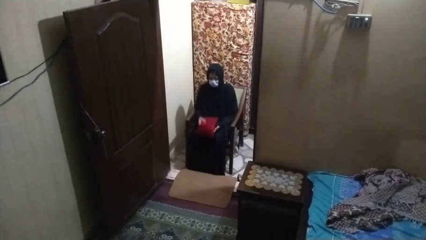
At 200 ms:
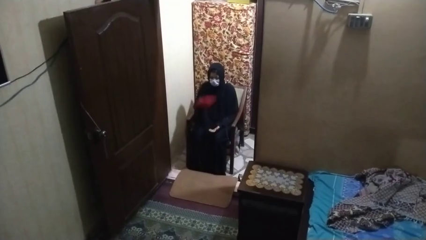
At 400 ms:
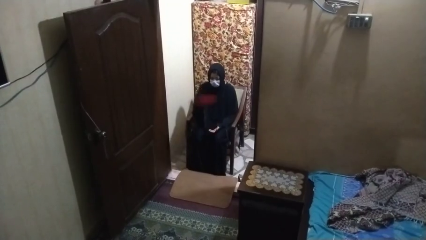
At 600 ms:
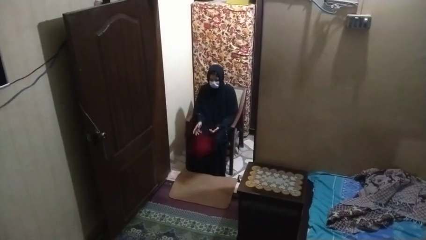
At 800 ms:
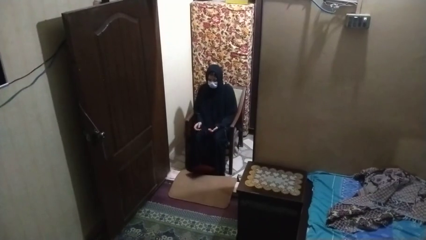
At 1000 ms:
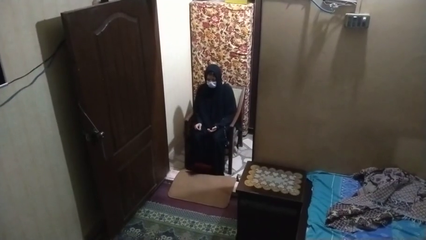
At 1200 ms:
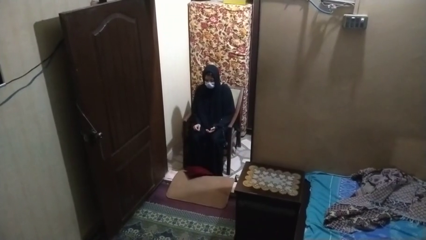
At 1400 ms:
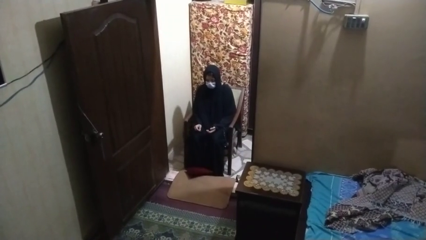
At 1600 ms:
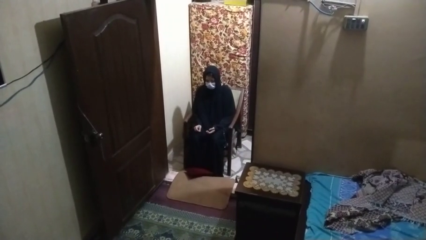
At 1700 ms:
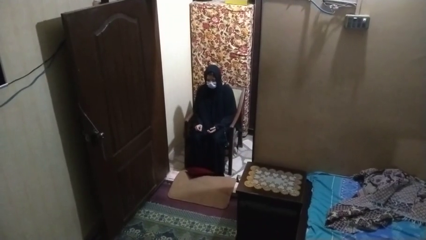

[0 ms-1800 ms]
person throws object into air

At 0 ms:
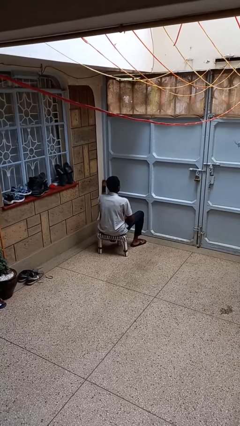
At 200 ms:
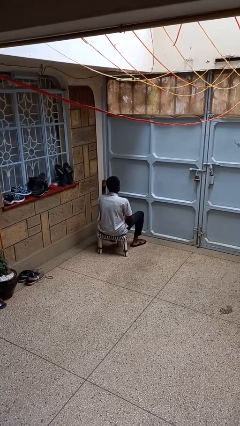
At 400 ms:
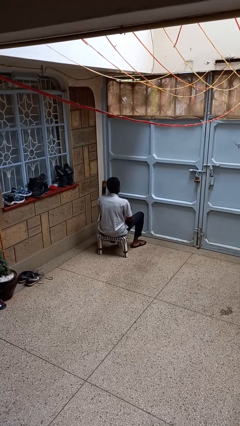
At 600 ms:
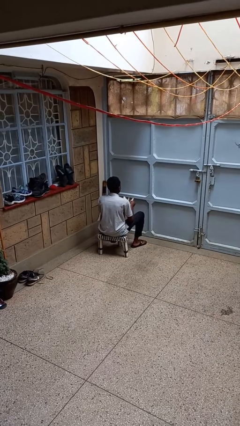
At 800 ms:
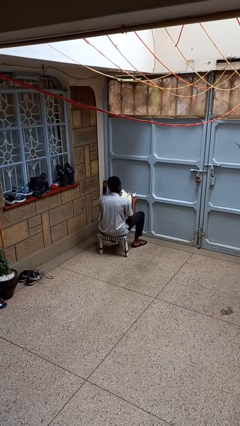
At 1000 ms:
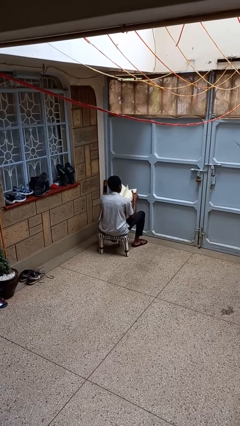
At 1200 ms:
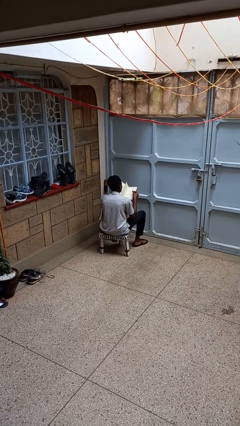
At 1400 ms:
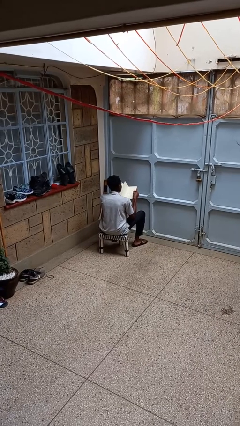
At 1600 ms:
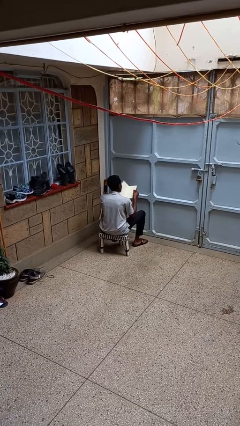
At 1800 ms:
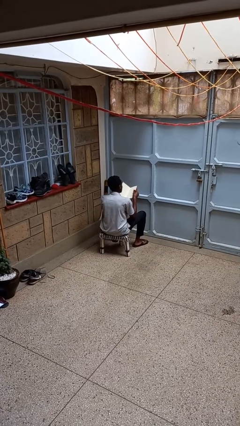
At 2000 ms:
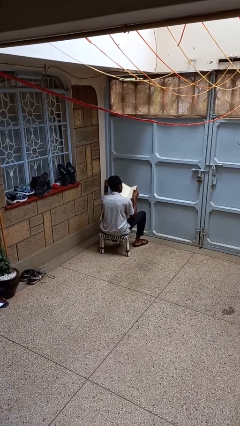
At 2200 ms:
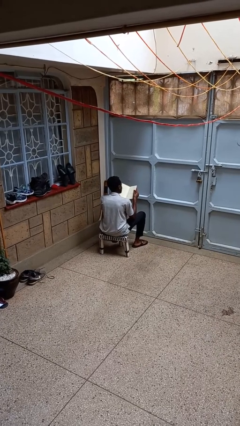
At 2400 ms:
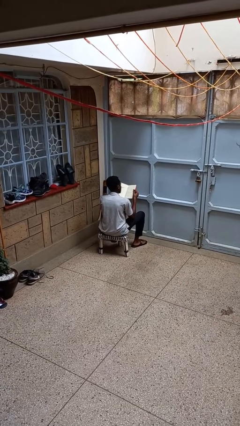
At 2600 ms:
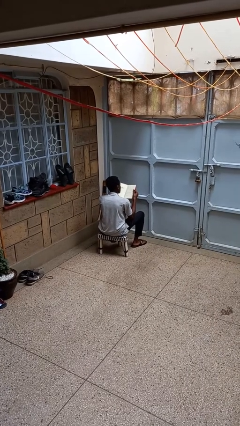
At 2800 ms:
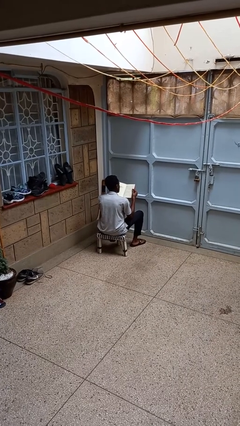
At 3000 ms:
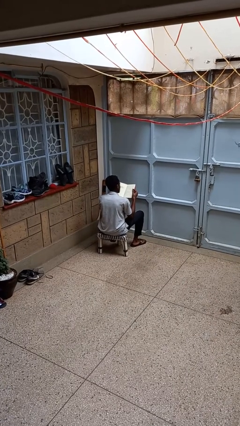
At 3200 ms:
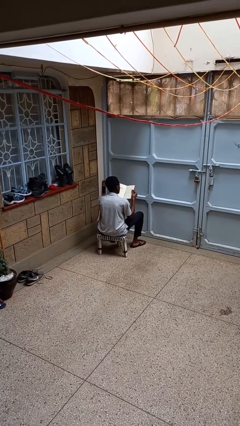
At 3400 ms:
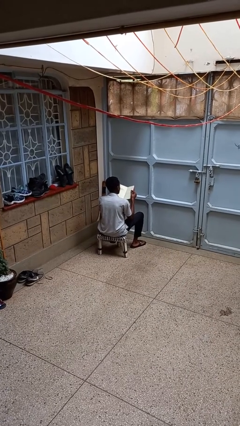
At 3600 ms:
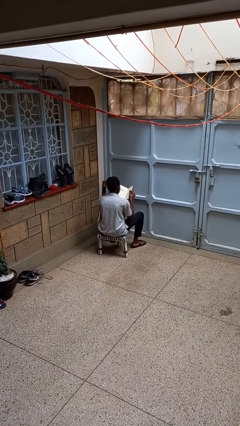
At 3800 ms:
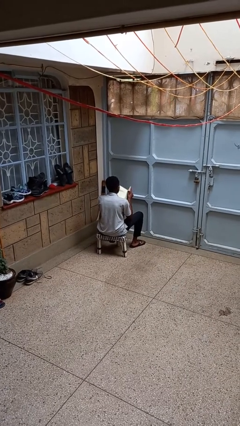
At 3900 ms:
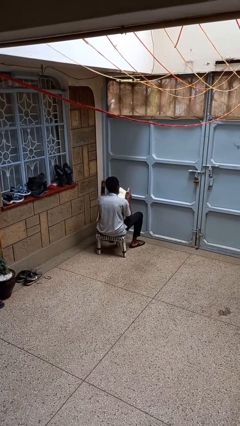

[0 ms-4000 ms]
person reads book

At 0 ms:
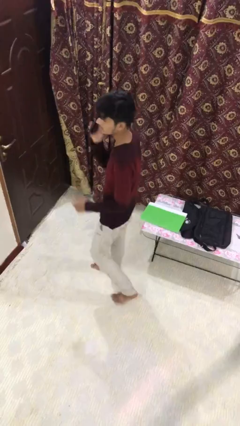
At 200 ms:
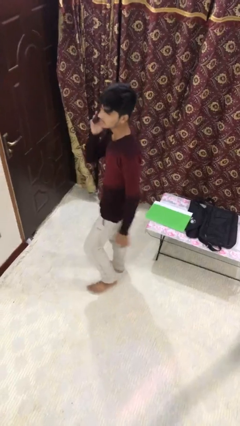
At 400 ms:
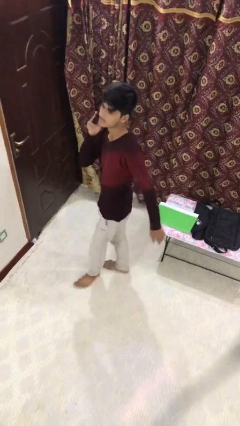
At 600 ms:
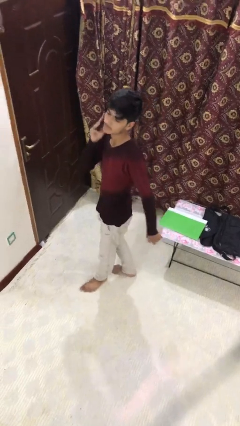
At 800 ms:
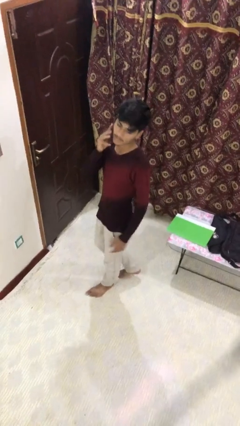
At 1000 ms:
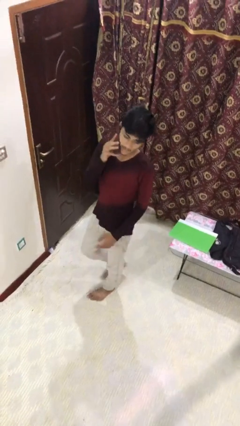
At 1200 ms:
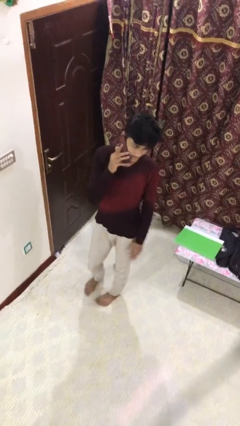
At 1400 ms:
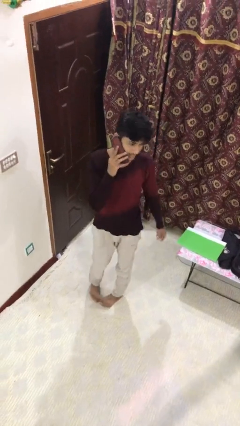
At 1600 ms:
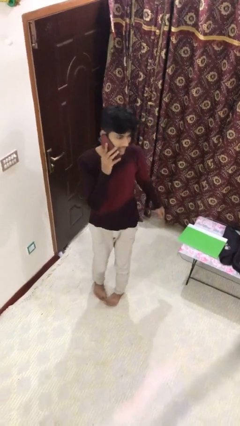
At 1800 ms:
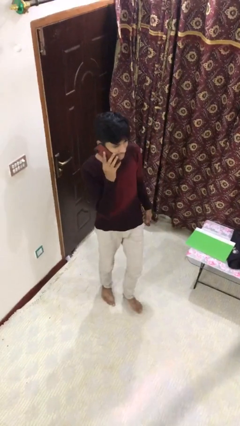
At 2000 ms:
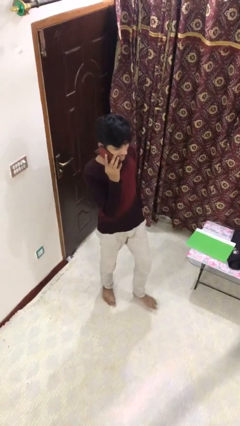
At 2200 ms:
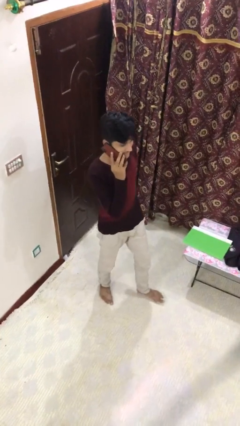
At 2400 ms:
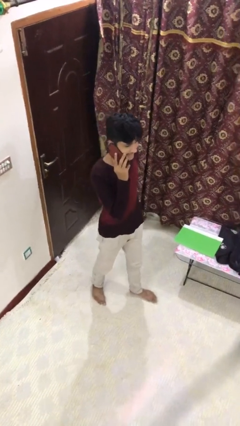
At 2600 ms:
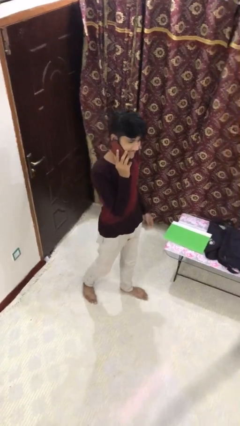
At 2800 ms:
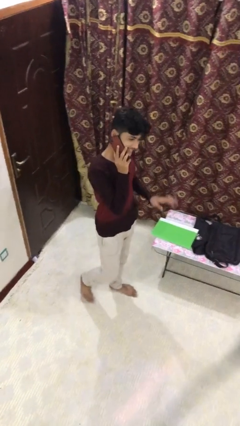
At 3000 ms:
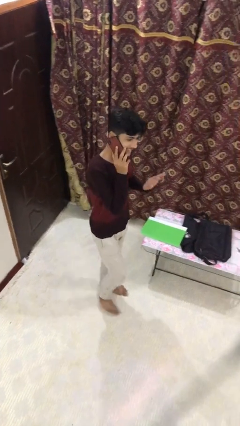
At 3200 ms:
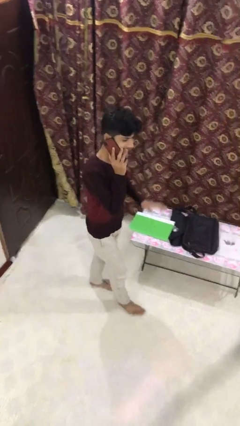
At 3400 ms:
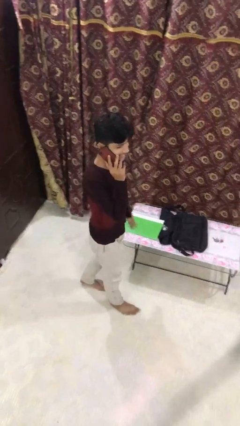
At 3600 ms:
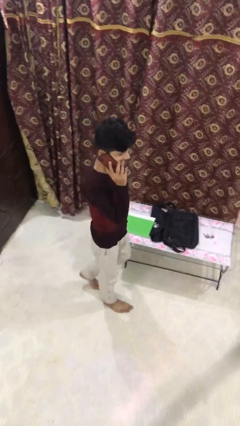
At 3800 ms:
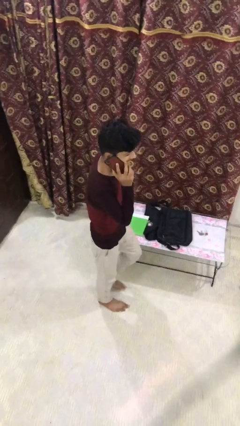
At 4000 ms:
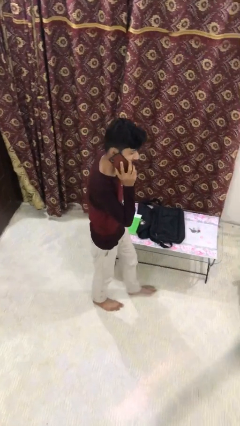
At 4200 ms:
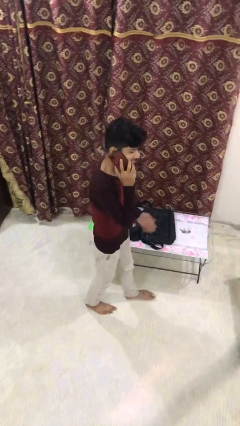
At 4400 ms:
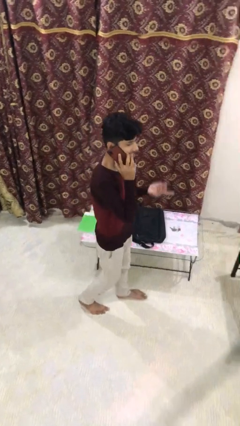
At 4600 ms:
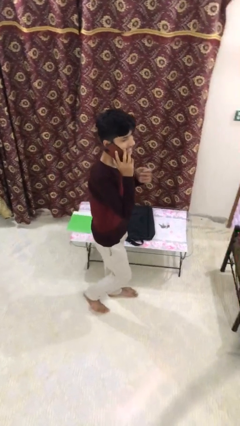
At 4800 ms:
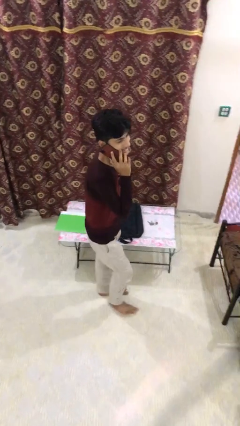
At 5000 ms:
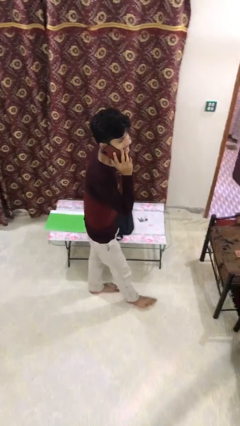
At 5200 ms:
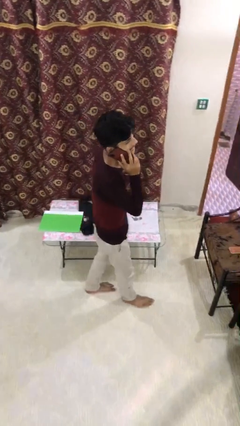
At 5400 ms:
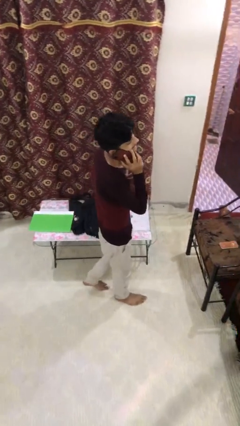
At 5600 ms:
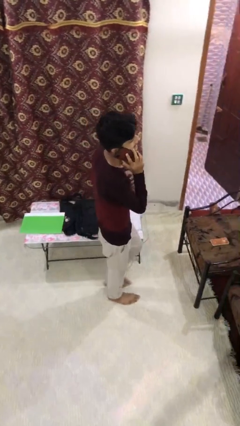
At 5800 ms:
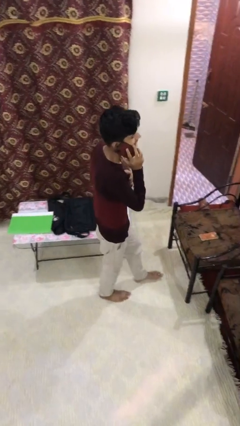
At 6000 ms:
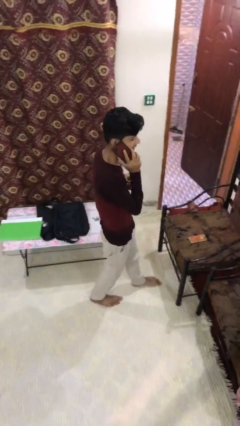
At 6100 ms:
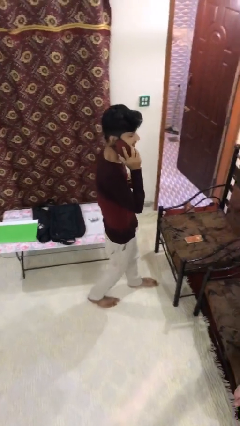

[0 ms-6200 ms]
person talks on phone

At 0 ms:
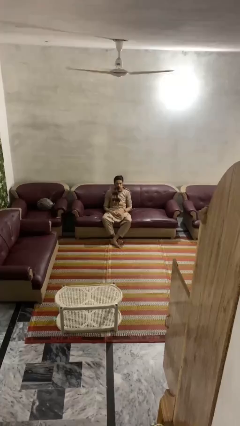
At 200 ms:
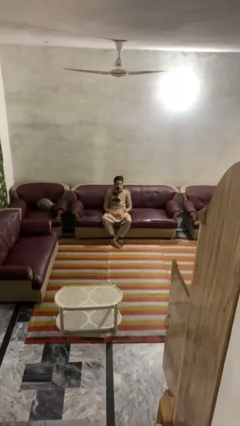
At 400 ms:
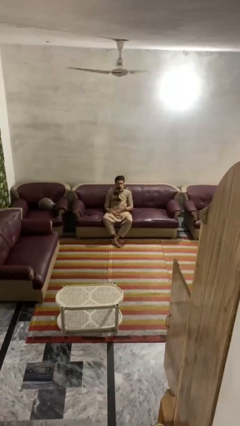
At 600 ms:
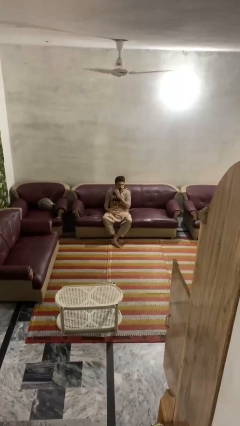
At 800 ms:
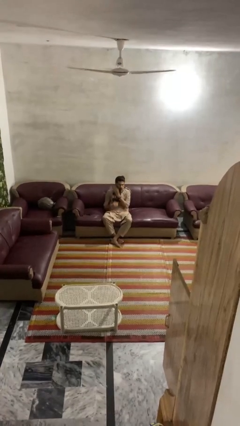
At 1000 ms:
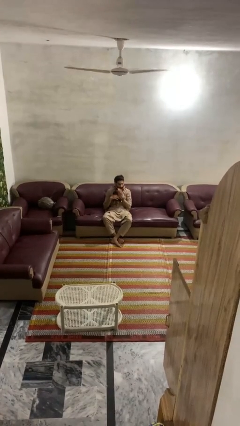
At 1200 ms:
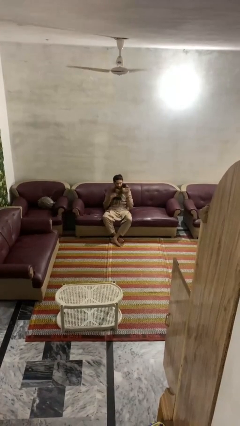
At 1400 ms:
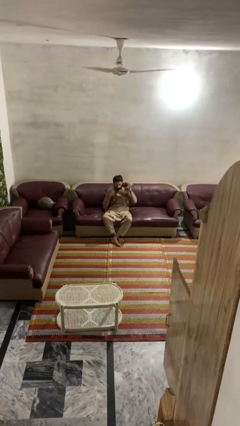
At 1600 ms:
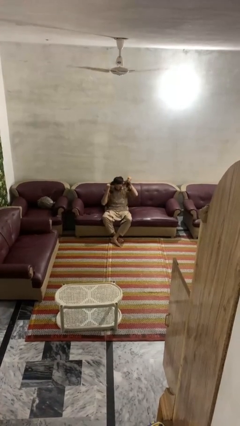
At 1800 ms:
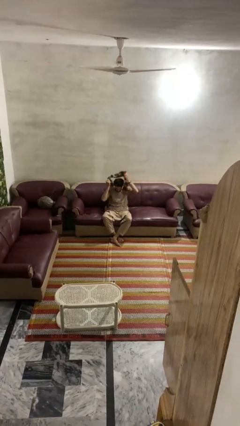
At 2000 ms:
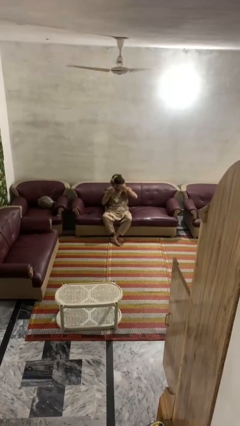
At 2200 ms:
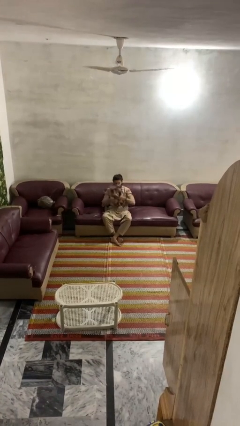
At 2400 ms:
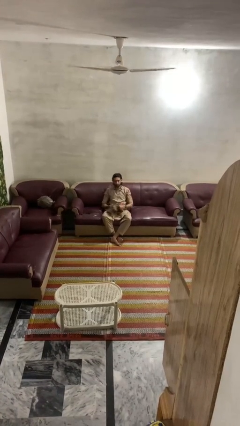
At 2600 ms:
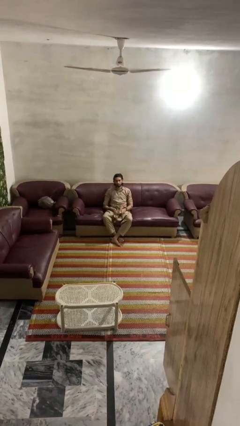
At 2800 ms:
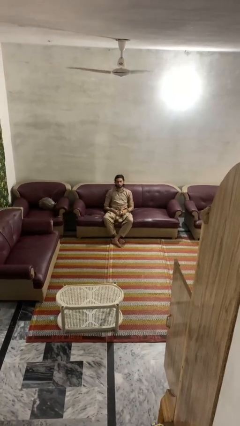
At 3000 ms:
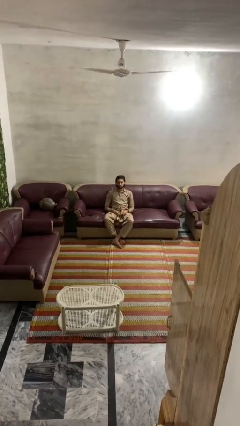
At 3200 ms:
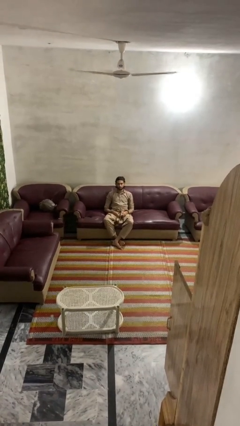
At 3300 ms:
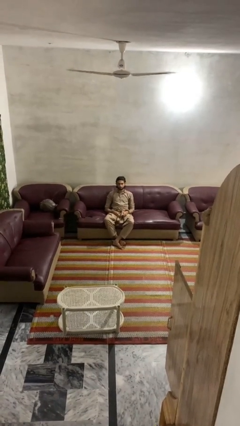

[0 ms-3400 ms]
person takes off scarf

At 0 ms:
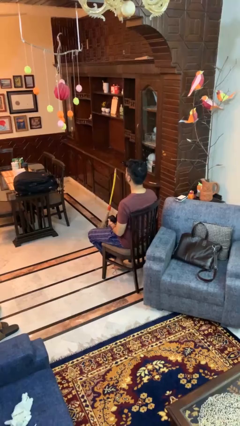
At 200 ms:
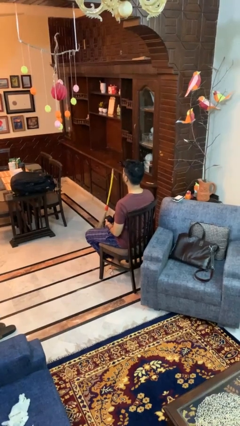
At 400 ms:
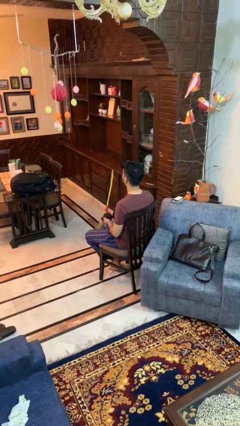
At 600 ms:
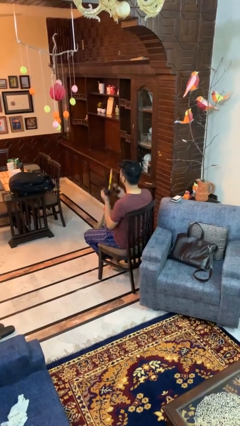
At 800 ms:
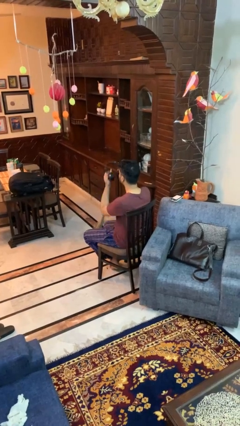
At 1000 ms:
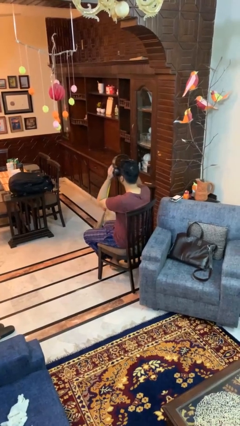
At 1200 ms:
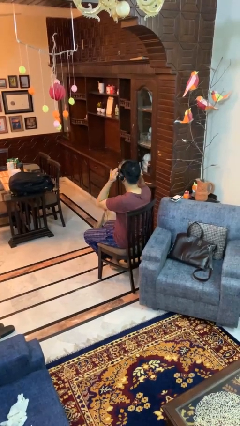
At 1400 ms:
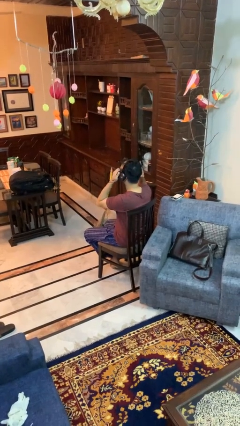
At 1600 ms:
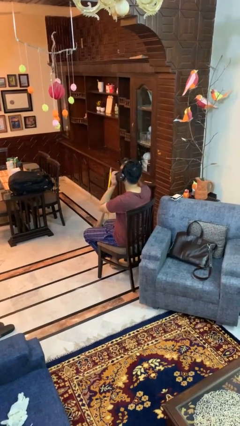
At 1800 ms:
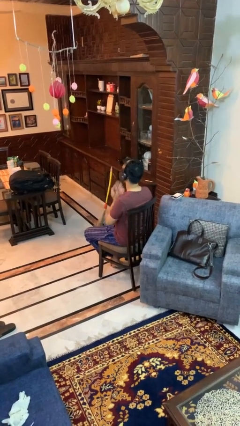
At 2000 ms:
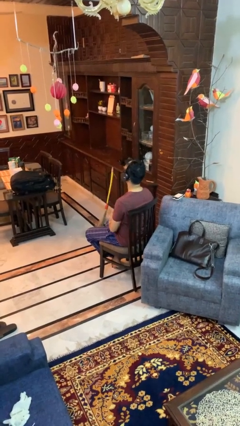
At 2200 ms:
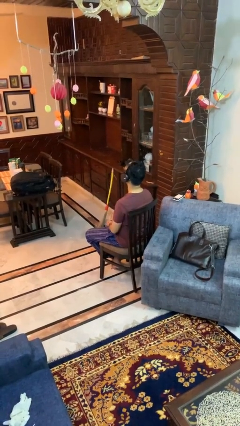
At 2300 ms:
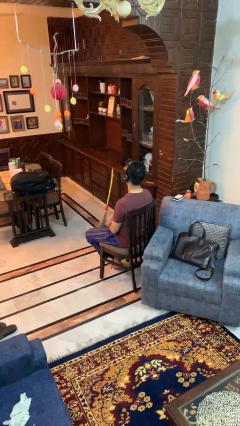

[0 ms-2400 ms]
person puts on headphones
